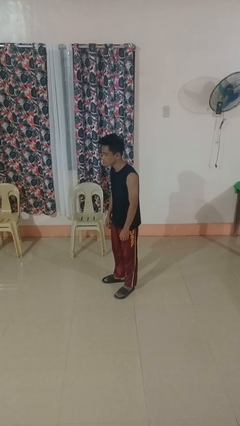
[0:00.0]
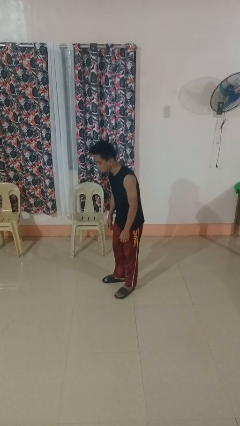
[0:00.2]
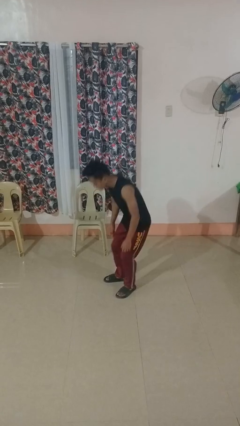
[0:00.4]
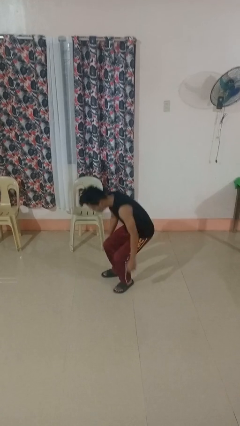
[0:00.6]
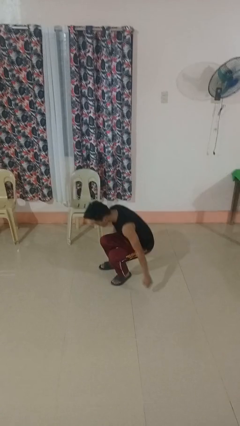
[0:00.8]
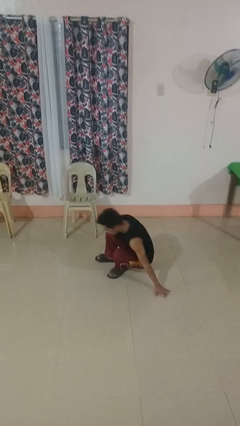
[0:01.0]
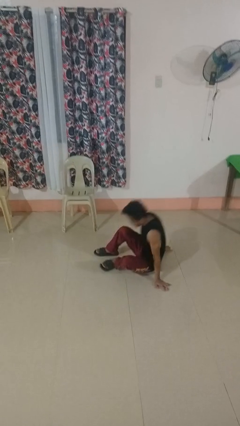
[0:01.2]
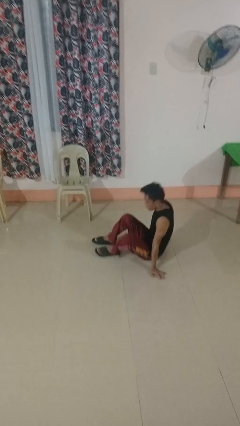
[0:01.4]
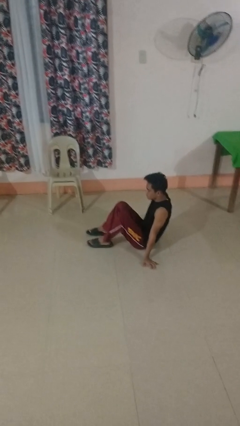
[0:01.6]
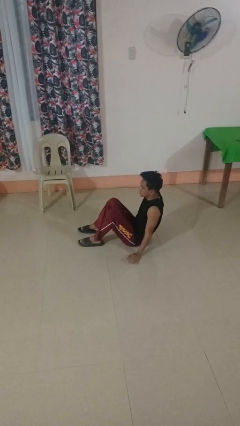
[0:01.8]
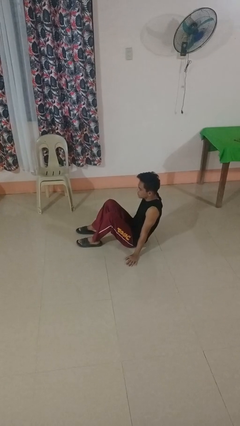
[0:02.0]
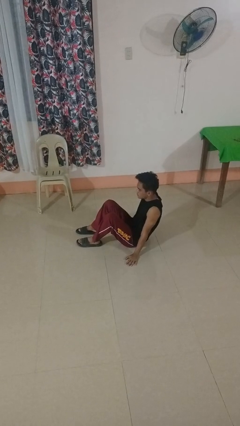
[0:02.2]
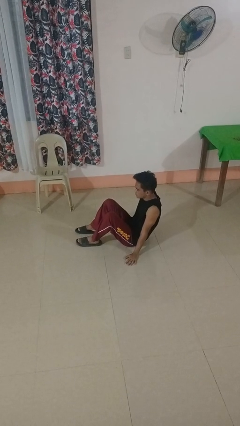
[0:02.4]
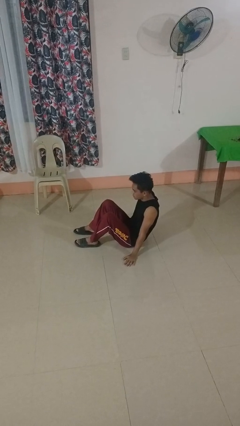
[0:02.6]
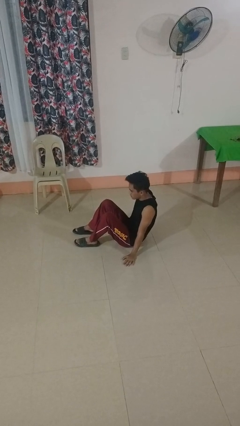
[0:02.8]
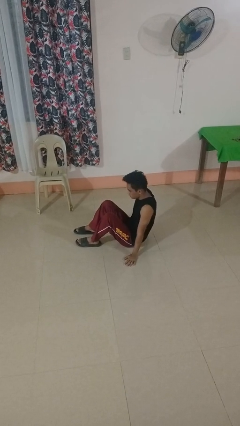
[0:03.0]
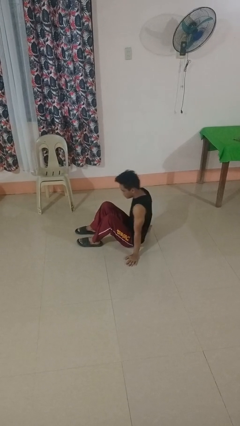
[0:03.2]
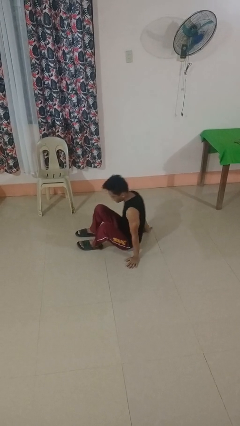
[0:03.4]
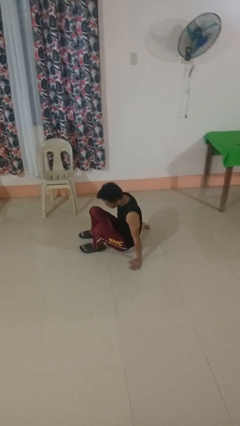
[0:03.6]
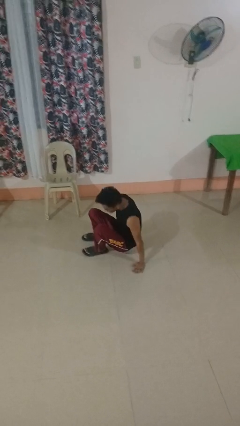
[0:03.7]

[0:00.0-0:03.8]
person falls while standing

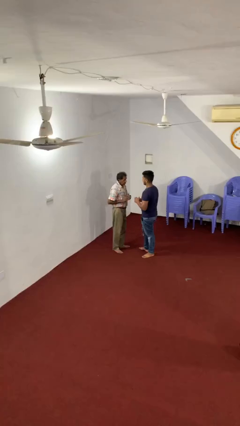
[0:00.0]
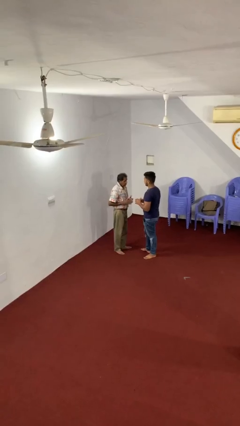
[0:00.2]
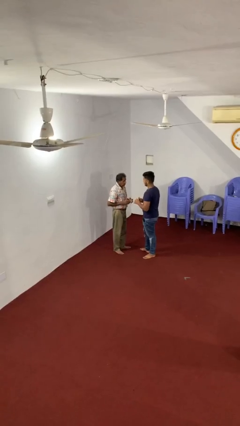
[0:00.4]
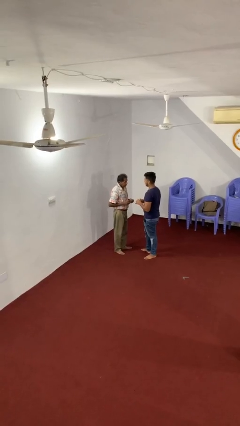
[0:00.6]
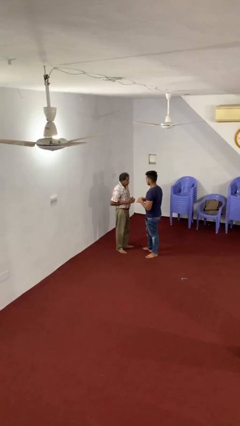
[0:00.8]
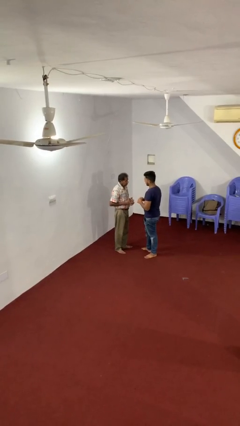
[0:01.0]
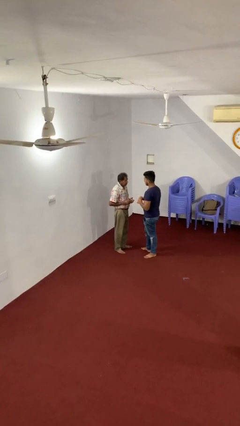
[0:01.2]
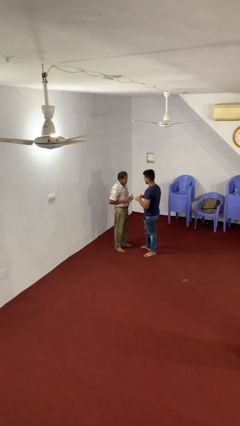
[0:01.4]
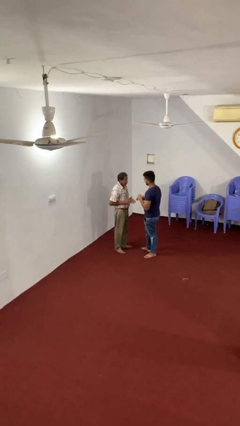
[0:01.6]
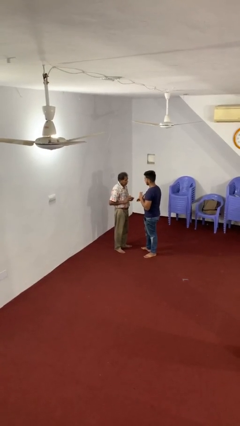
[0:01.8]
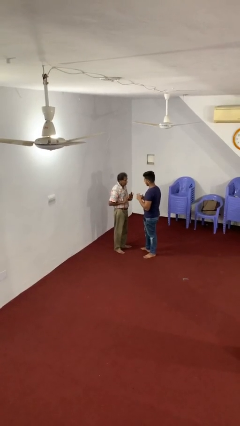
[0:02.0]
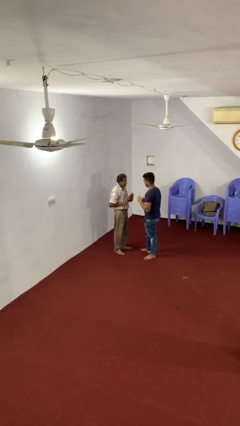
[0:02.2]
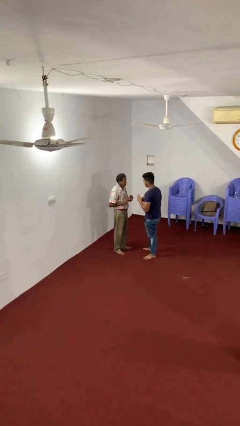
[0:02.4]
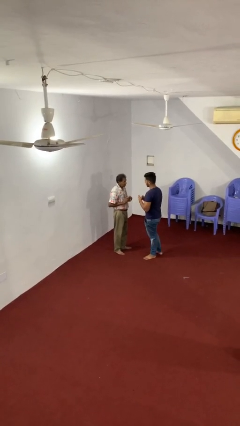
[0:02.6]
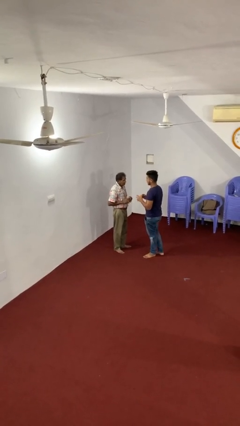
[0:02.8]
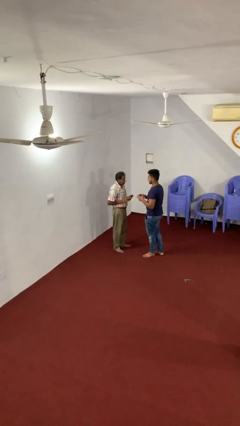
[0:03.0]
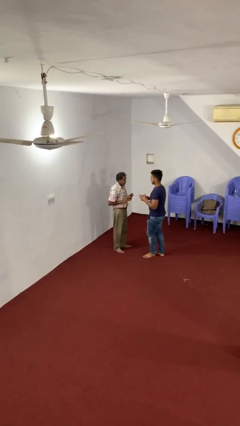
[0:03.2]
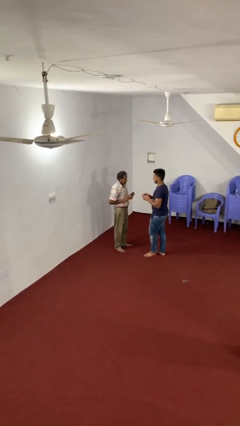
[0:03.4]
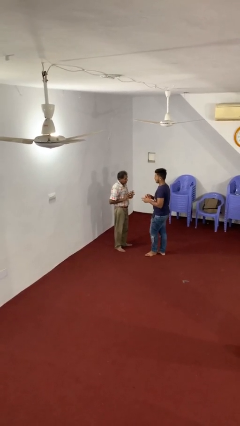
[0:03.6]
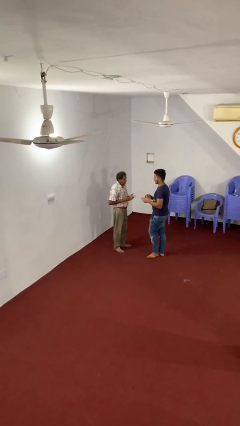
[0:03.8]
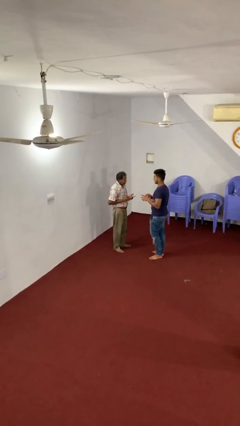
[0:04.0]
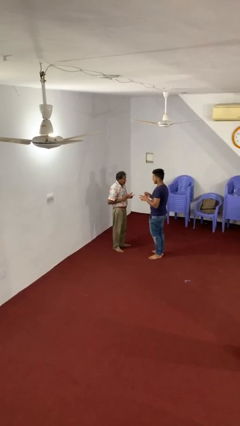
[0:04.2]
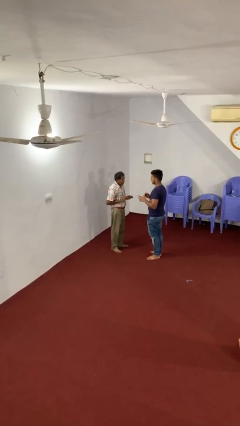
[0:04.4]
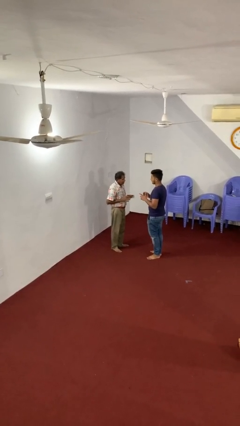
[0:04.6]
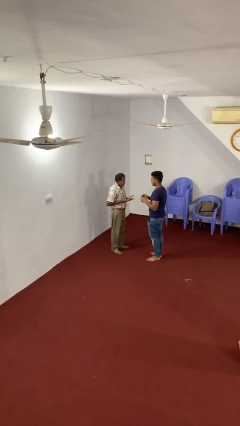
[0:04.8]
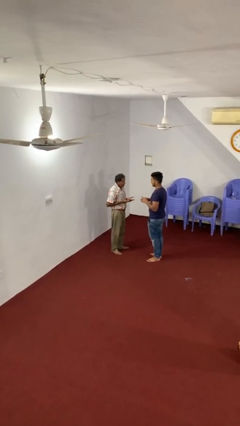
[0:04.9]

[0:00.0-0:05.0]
person talks to person

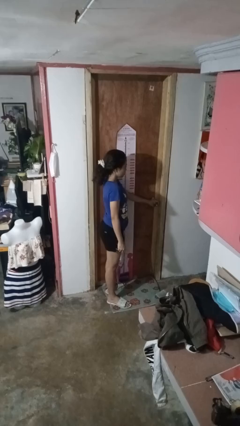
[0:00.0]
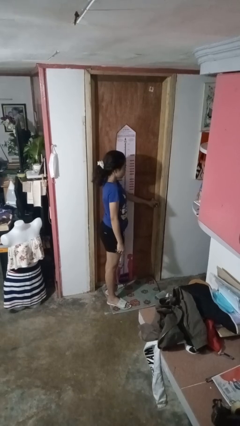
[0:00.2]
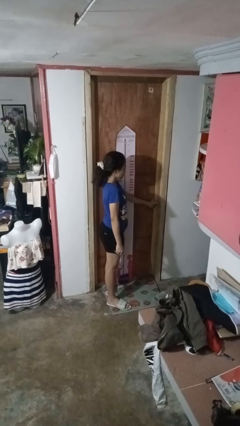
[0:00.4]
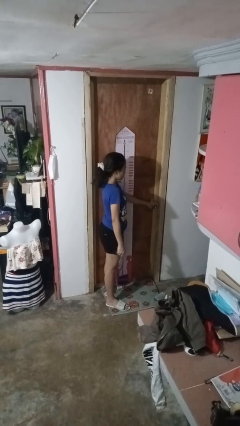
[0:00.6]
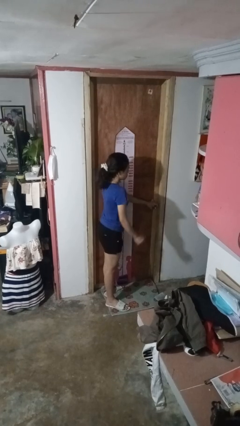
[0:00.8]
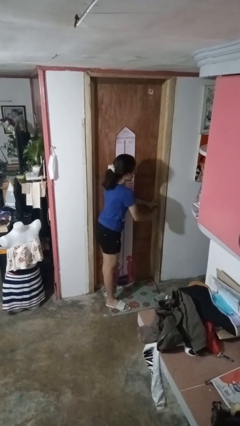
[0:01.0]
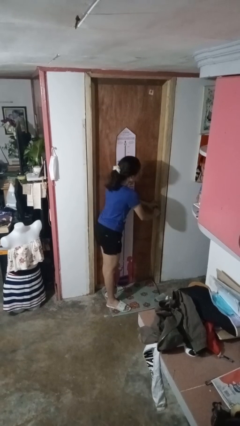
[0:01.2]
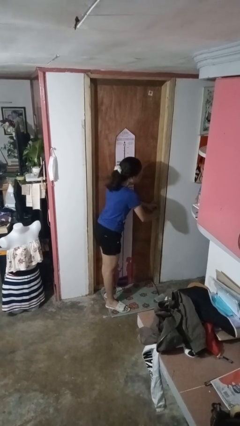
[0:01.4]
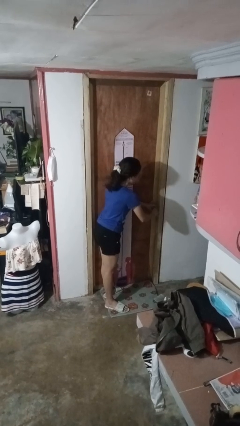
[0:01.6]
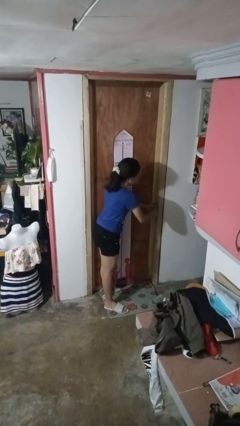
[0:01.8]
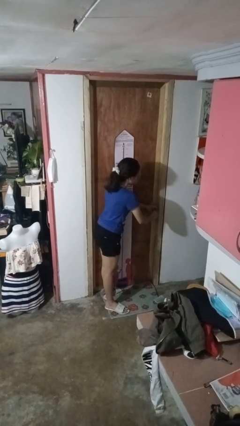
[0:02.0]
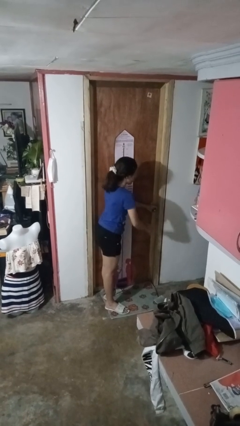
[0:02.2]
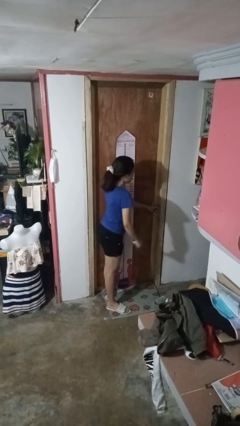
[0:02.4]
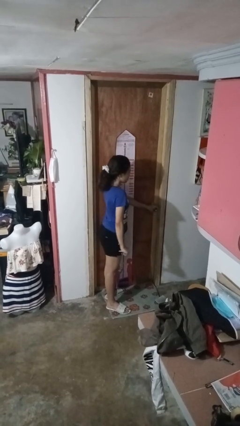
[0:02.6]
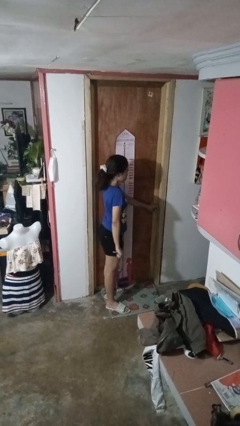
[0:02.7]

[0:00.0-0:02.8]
person locks door with keys

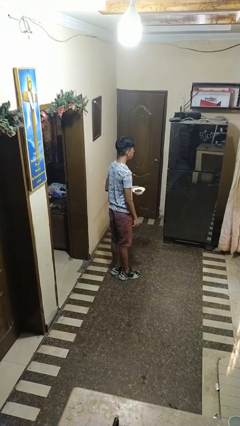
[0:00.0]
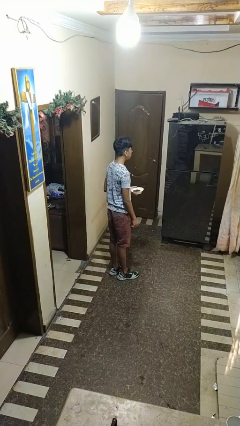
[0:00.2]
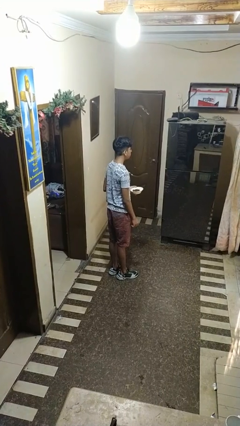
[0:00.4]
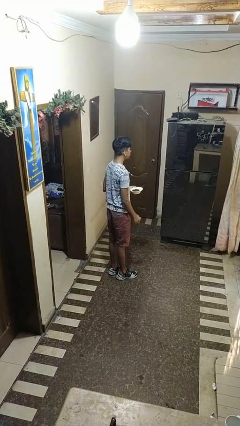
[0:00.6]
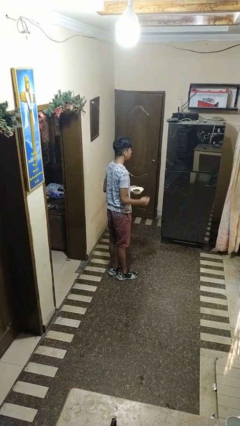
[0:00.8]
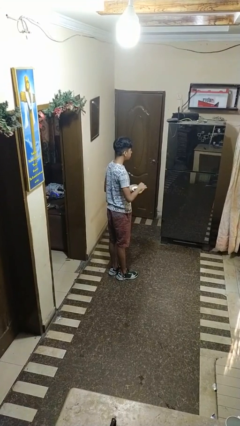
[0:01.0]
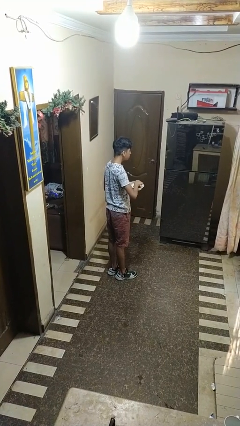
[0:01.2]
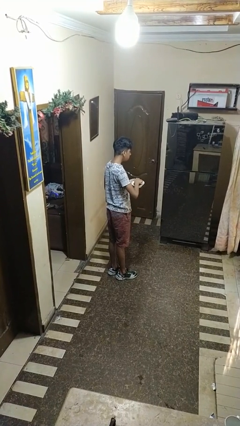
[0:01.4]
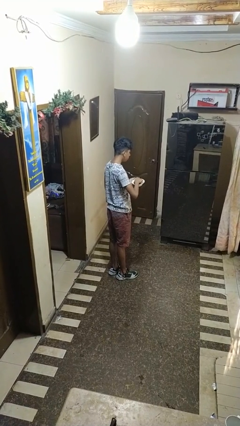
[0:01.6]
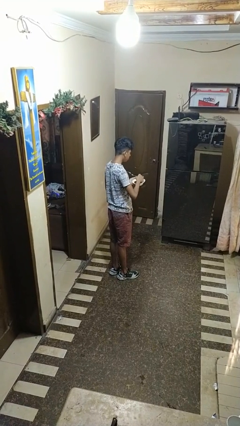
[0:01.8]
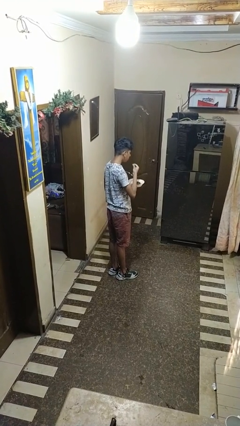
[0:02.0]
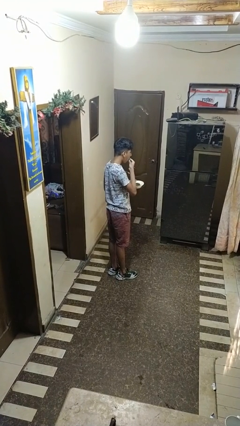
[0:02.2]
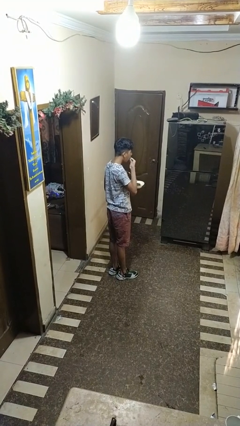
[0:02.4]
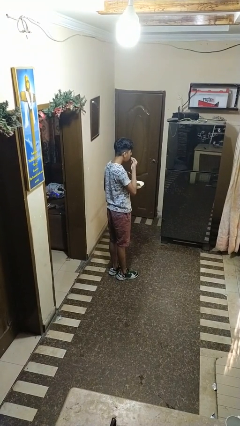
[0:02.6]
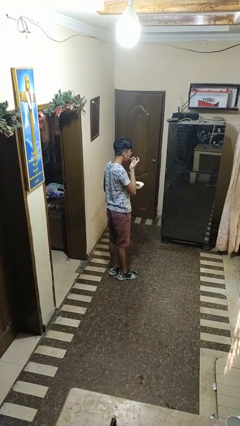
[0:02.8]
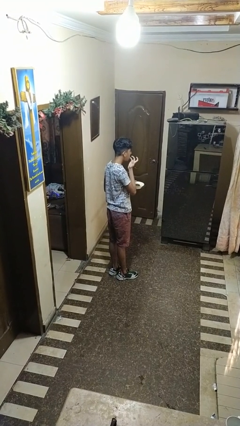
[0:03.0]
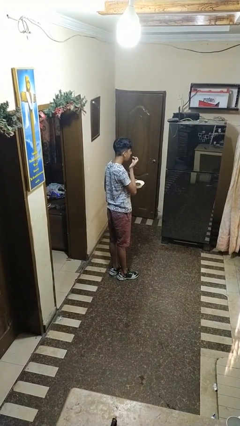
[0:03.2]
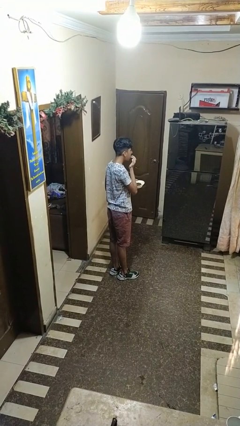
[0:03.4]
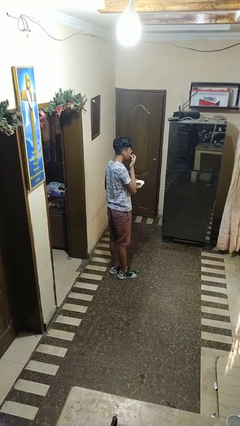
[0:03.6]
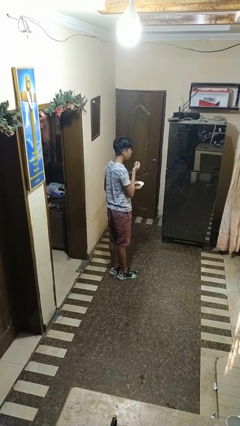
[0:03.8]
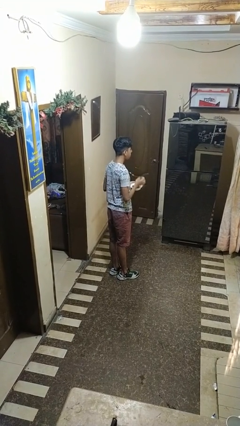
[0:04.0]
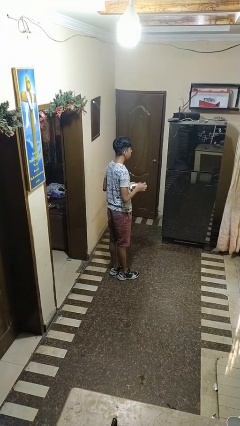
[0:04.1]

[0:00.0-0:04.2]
person licks fingers

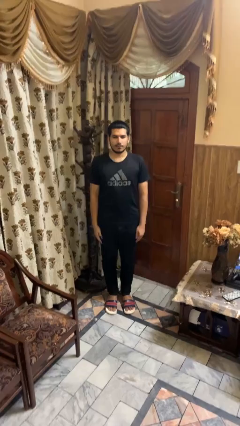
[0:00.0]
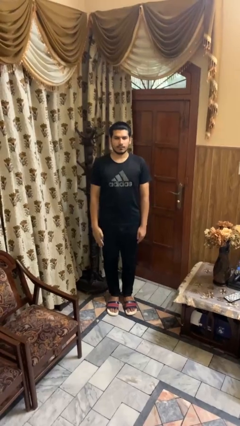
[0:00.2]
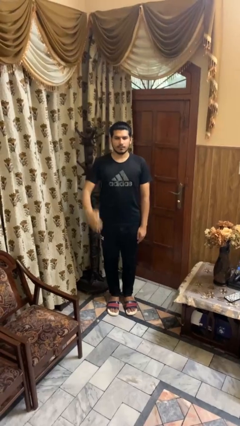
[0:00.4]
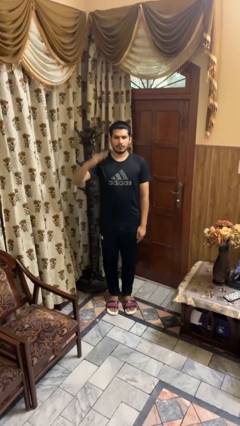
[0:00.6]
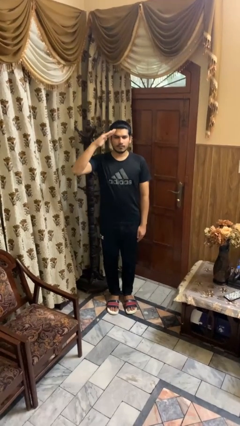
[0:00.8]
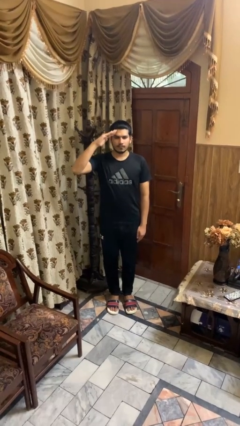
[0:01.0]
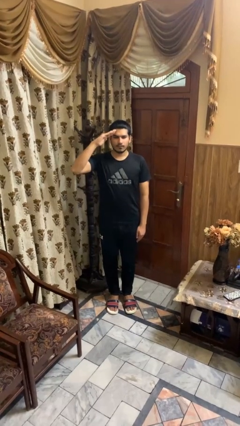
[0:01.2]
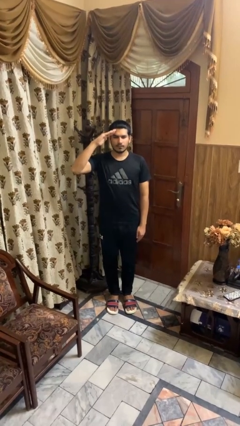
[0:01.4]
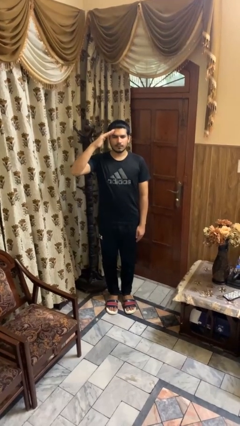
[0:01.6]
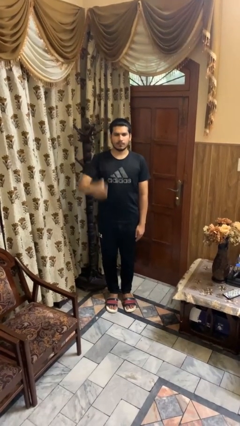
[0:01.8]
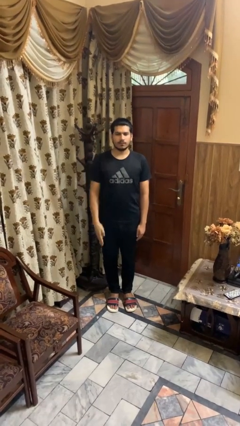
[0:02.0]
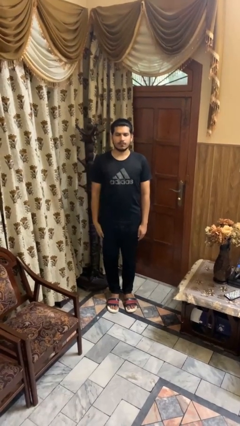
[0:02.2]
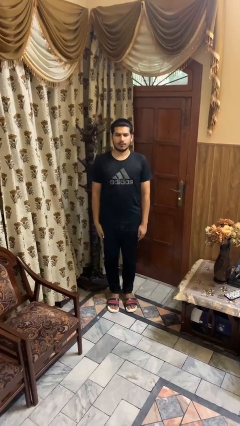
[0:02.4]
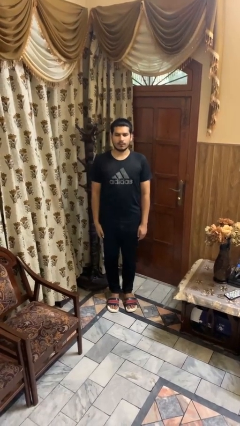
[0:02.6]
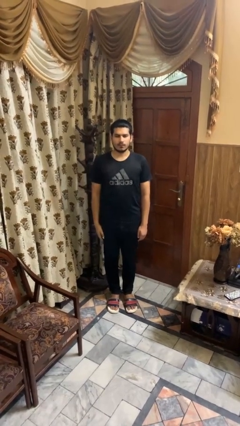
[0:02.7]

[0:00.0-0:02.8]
person salutes
